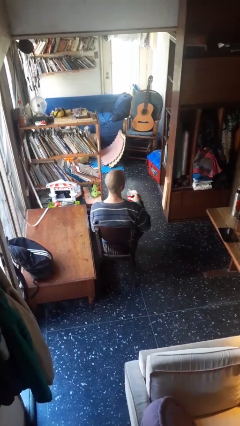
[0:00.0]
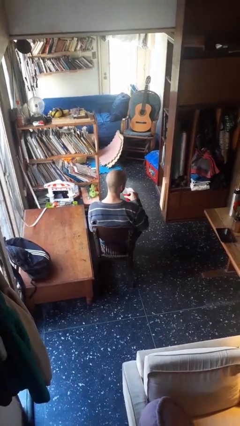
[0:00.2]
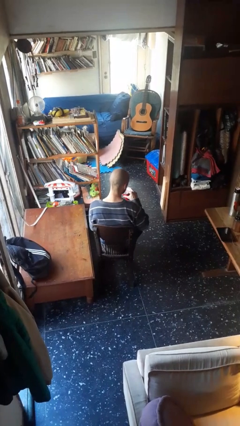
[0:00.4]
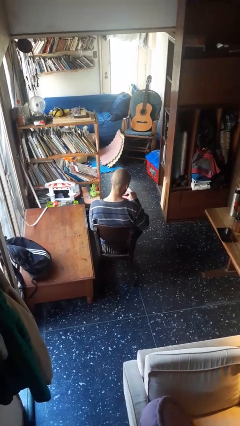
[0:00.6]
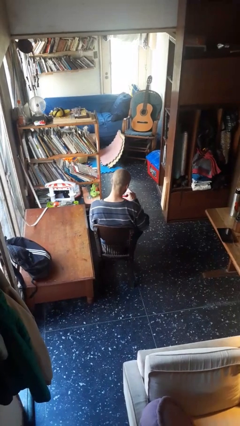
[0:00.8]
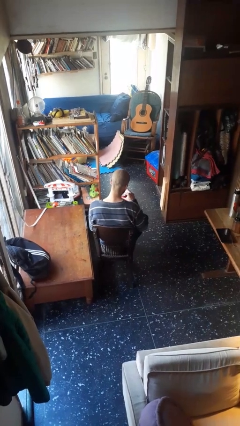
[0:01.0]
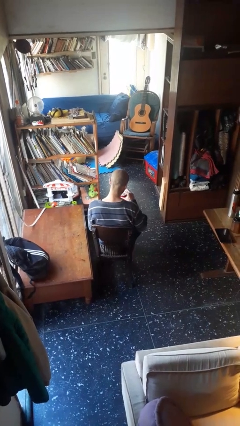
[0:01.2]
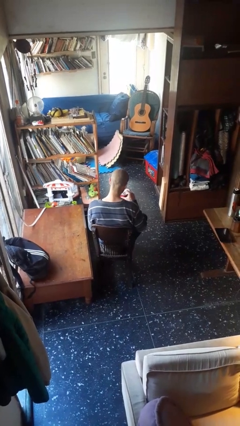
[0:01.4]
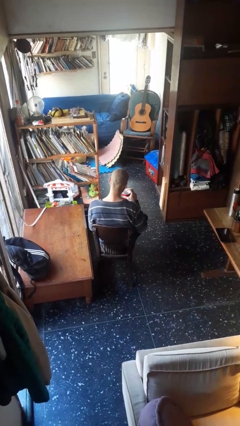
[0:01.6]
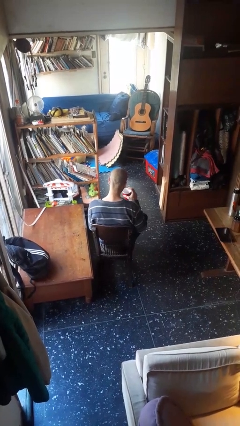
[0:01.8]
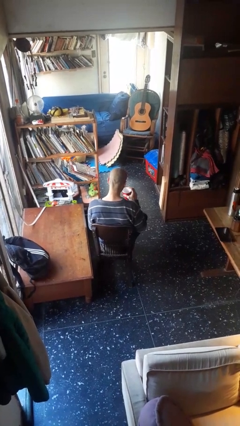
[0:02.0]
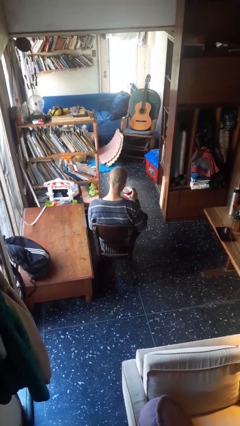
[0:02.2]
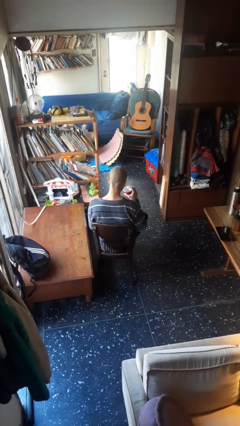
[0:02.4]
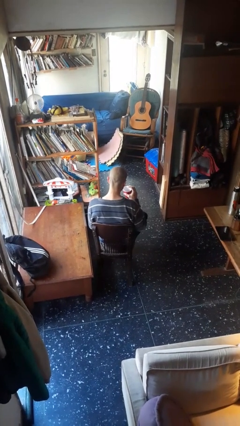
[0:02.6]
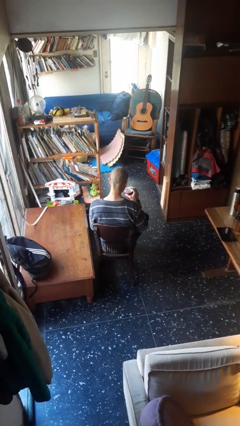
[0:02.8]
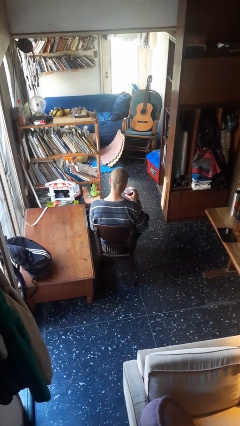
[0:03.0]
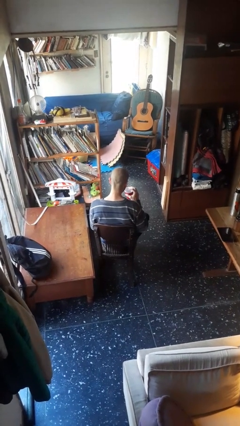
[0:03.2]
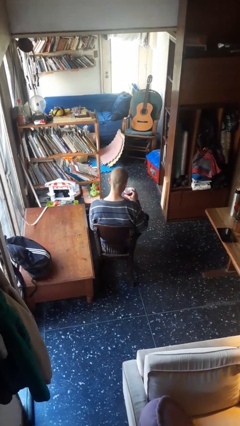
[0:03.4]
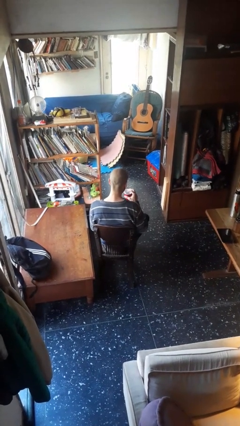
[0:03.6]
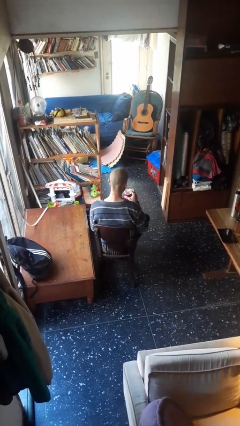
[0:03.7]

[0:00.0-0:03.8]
person drinks from straw

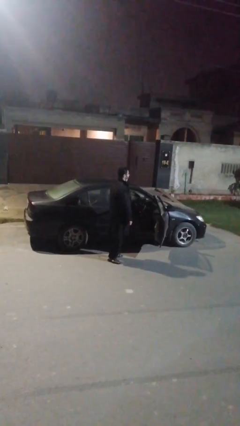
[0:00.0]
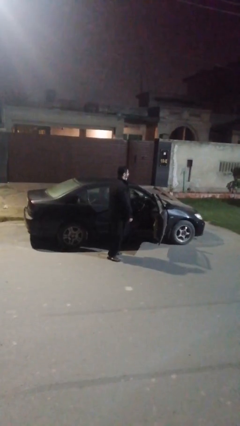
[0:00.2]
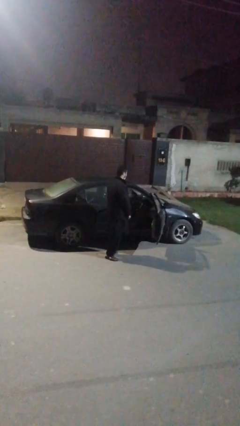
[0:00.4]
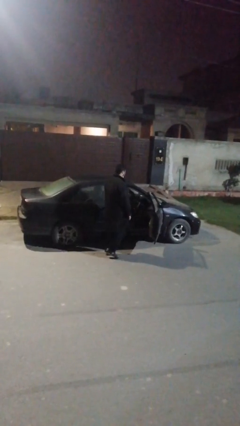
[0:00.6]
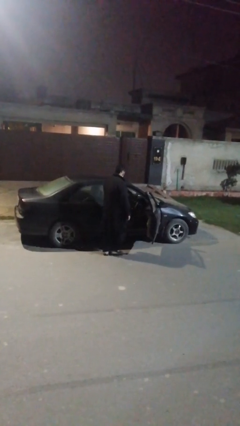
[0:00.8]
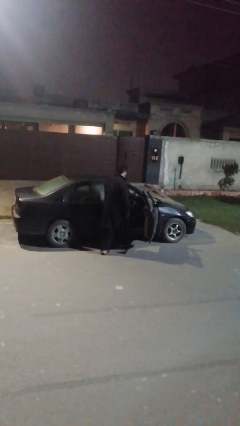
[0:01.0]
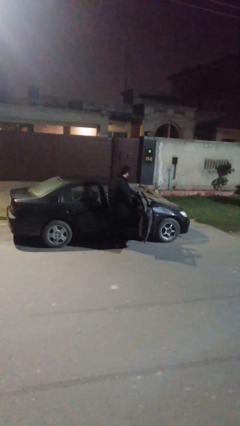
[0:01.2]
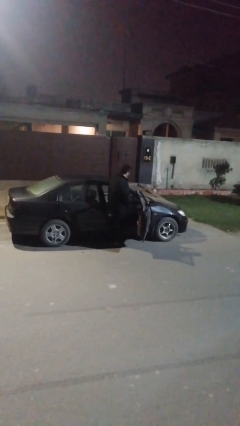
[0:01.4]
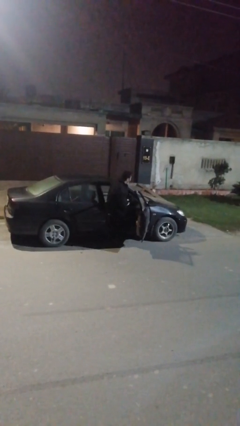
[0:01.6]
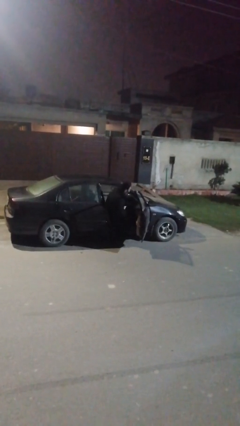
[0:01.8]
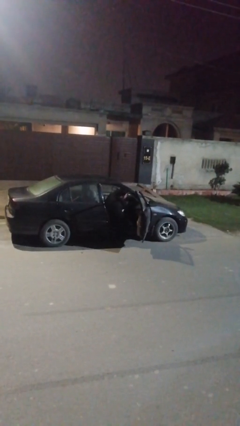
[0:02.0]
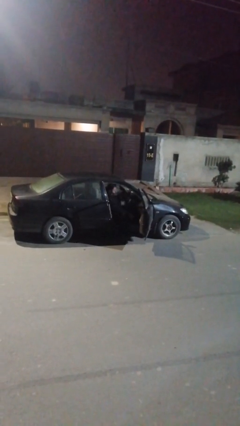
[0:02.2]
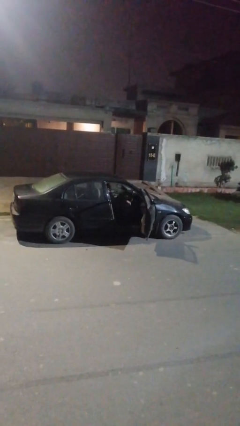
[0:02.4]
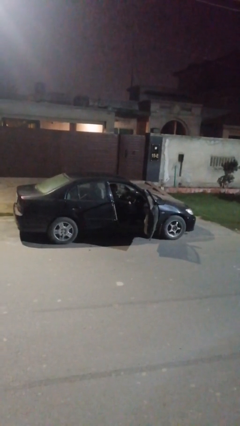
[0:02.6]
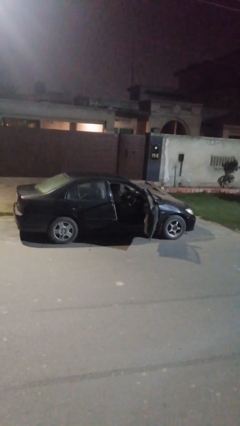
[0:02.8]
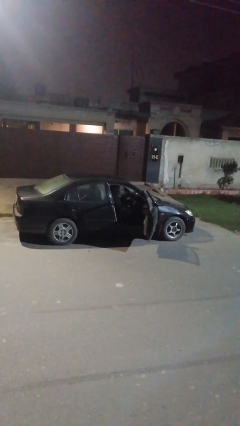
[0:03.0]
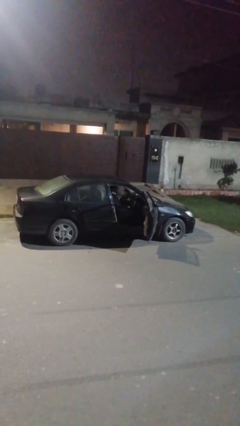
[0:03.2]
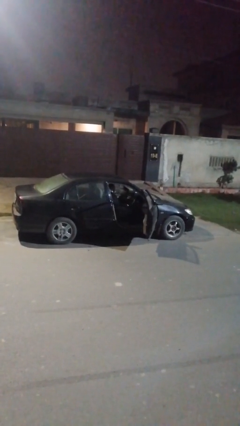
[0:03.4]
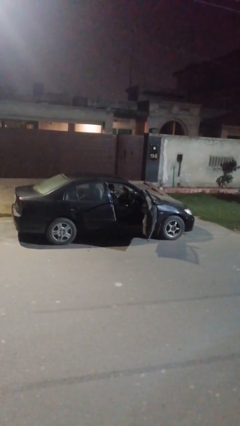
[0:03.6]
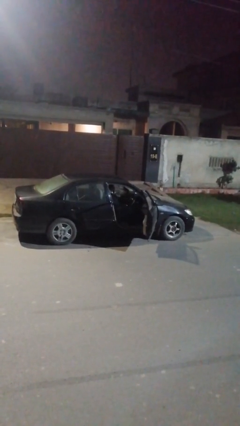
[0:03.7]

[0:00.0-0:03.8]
person enters car

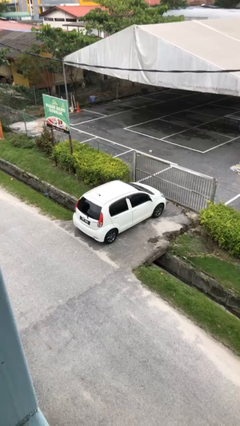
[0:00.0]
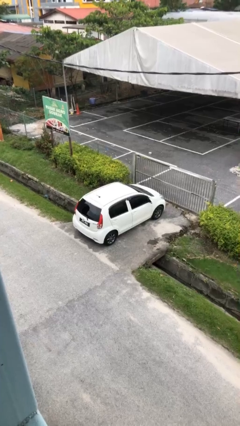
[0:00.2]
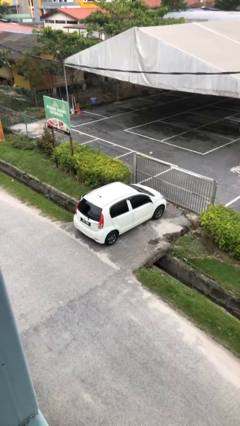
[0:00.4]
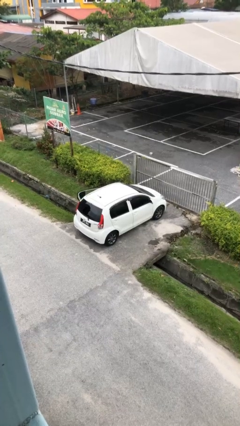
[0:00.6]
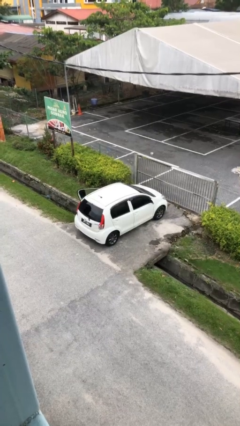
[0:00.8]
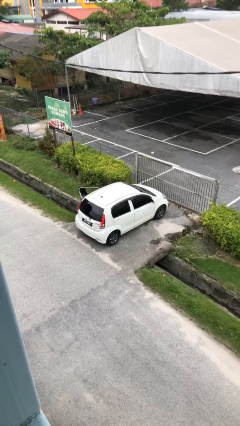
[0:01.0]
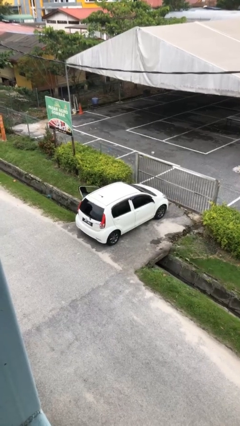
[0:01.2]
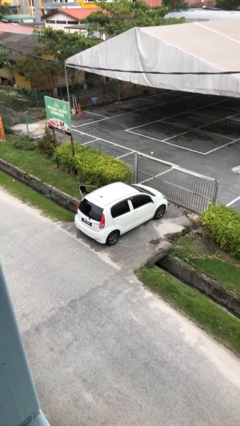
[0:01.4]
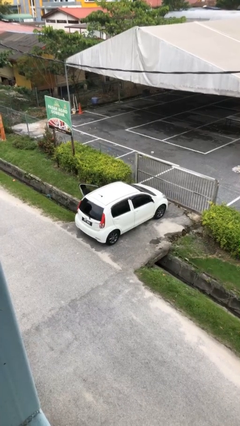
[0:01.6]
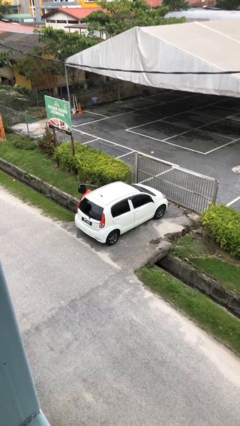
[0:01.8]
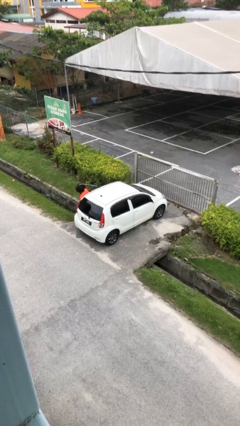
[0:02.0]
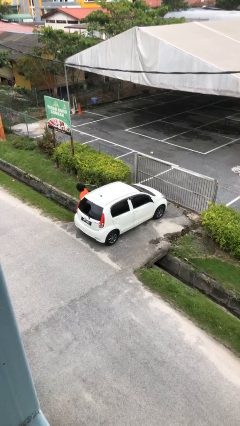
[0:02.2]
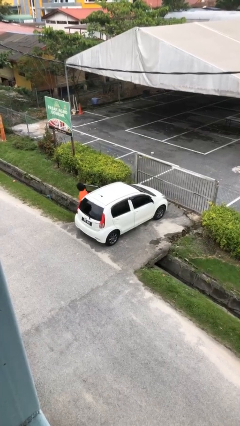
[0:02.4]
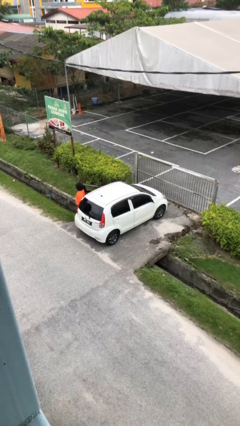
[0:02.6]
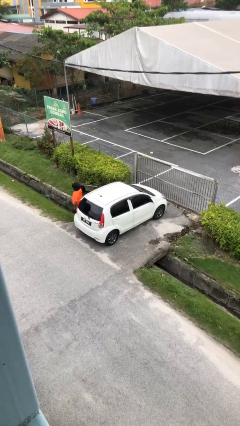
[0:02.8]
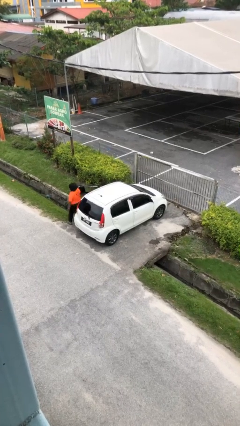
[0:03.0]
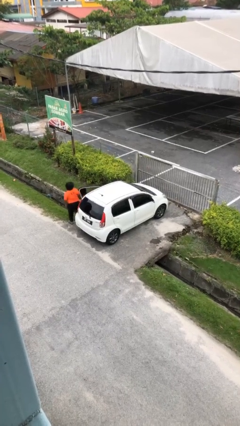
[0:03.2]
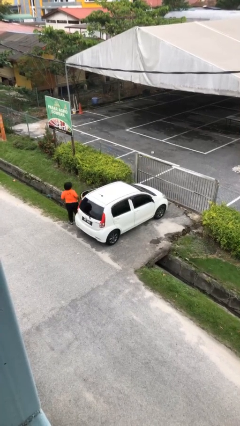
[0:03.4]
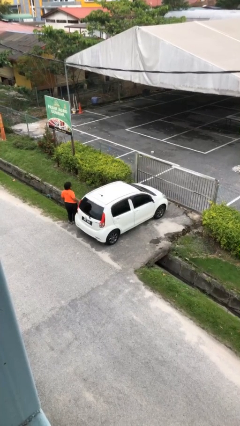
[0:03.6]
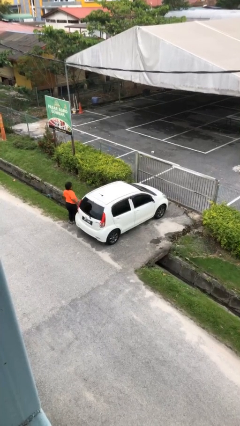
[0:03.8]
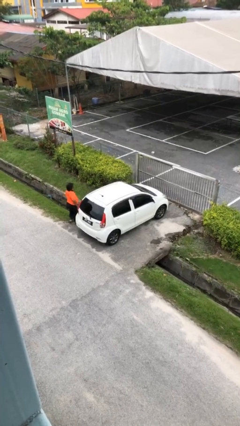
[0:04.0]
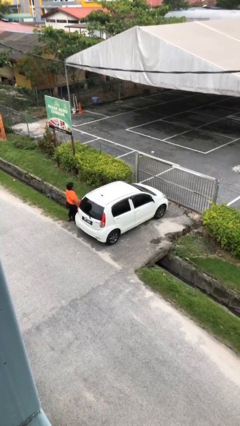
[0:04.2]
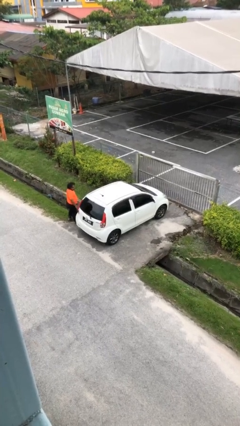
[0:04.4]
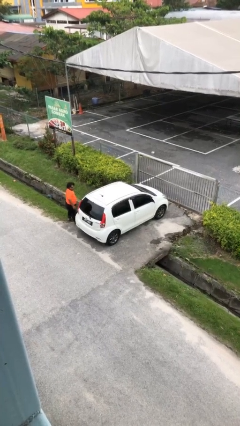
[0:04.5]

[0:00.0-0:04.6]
car drops off person

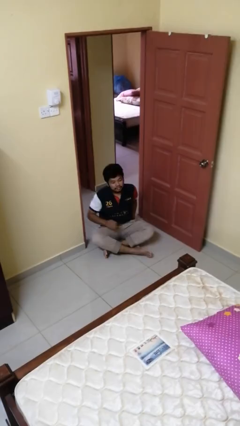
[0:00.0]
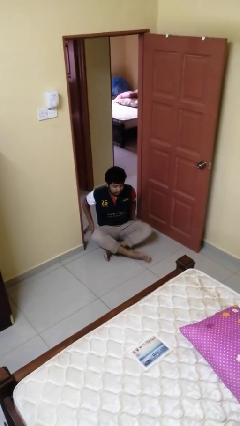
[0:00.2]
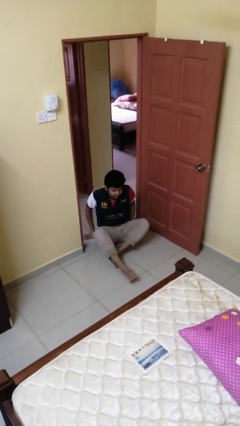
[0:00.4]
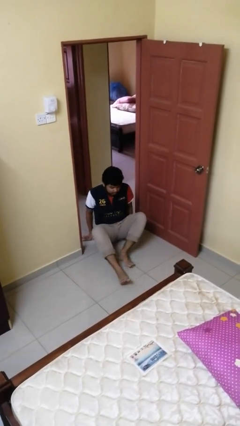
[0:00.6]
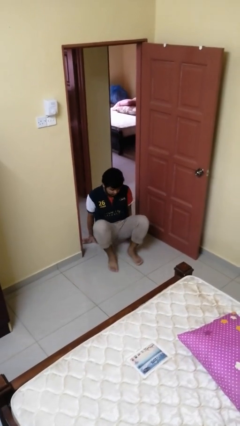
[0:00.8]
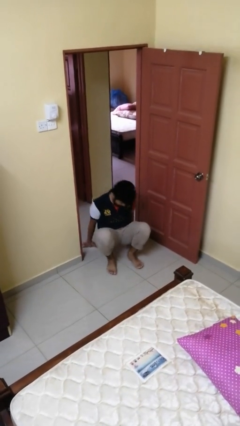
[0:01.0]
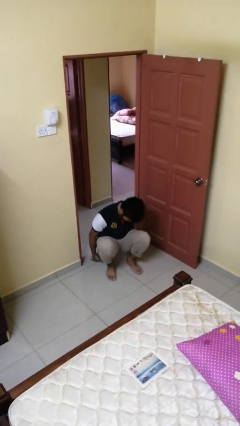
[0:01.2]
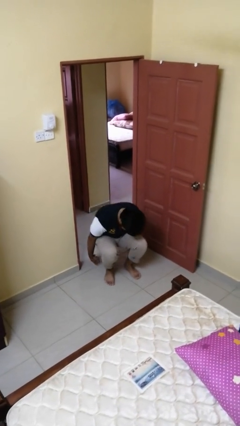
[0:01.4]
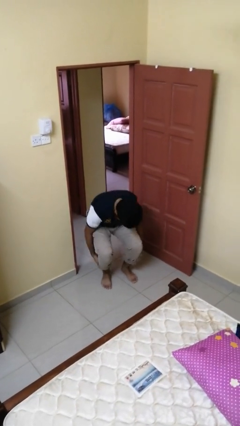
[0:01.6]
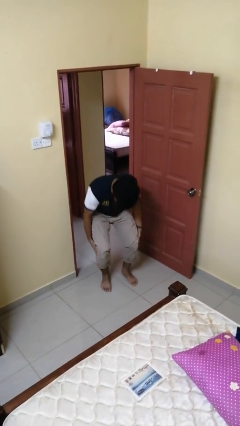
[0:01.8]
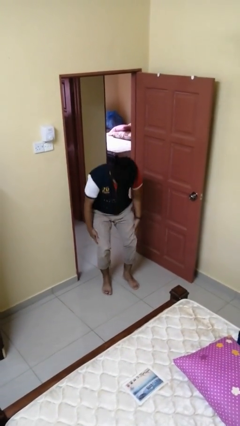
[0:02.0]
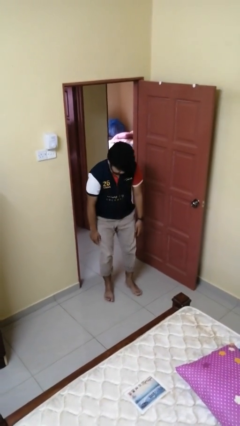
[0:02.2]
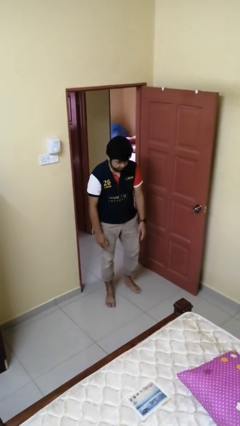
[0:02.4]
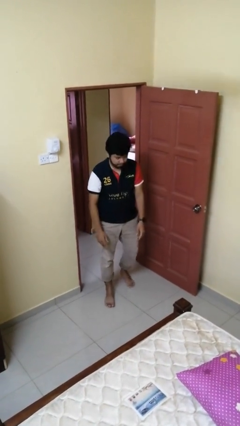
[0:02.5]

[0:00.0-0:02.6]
person stands up from floor

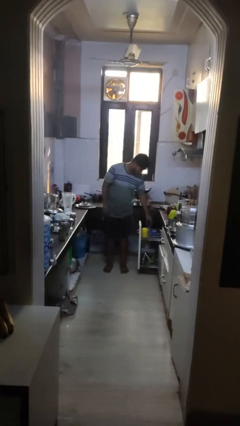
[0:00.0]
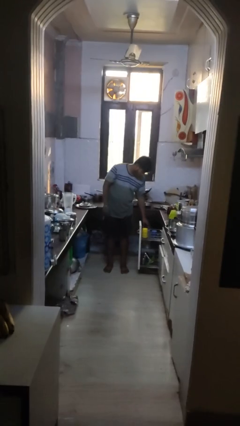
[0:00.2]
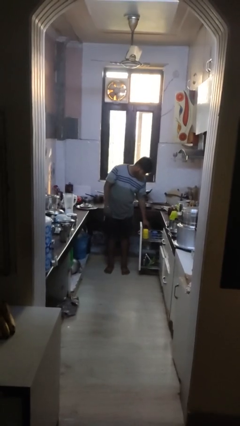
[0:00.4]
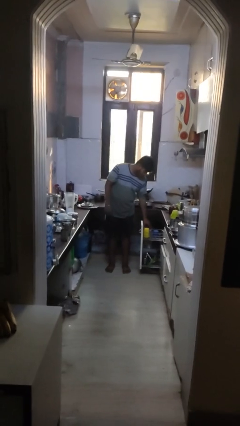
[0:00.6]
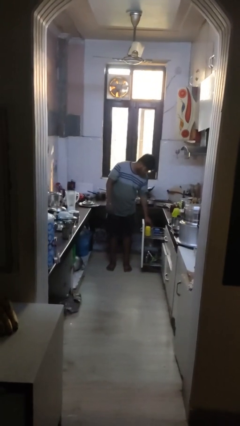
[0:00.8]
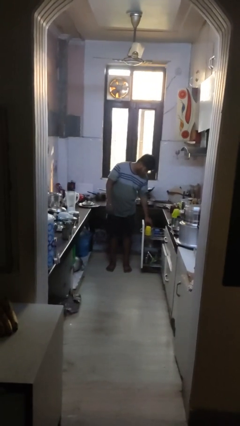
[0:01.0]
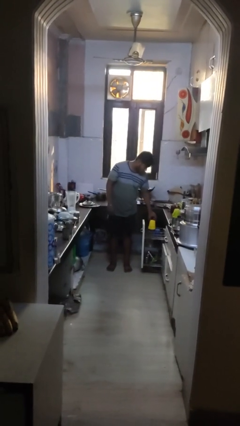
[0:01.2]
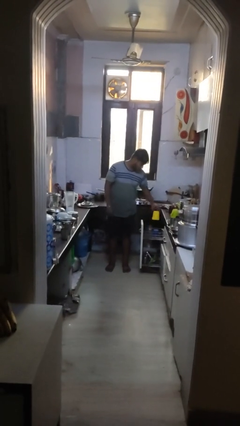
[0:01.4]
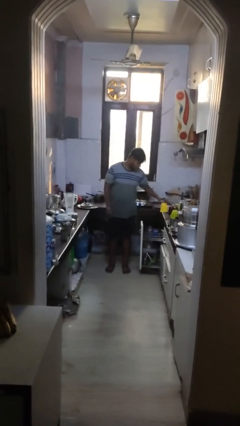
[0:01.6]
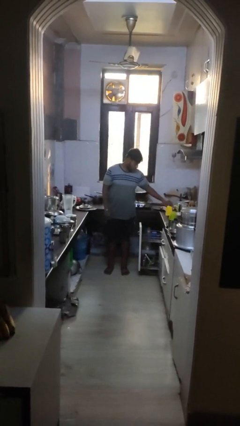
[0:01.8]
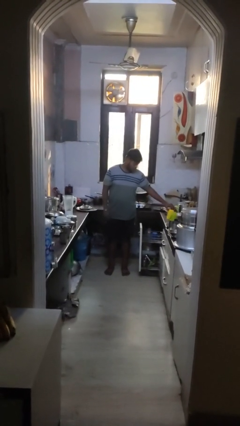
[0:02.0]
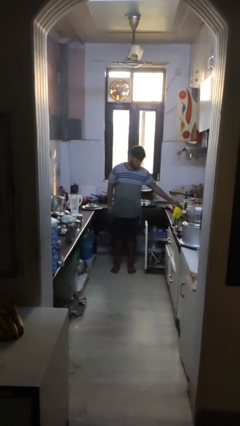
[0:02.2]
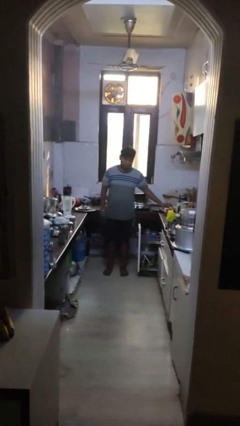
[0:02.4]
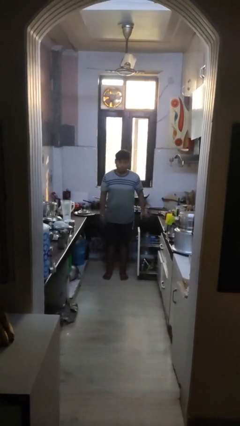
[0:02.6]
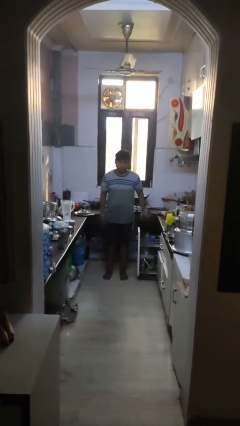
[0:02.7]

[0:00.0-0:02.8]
person unloads dishwasher
